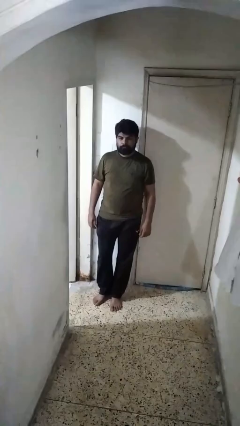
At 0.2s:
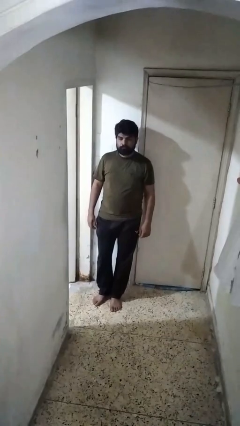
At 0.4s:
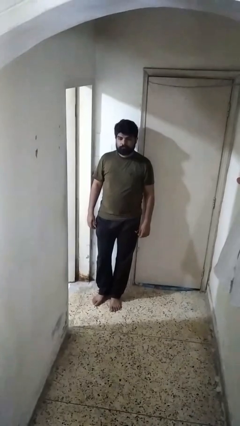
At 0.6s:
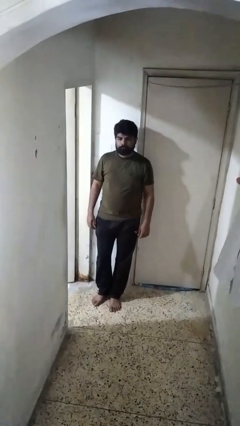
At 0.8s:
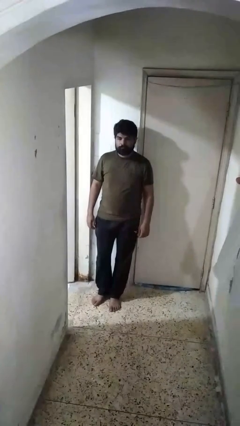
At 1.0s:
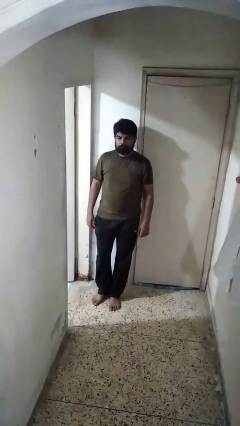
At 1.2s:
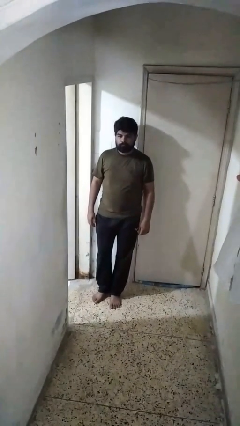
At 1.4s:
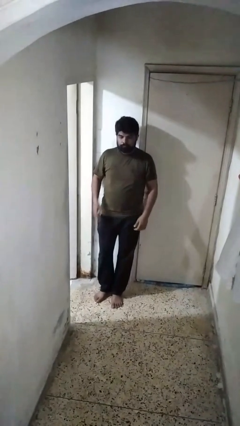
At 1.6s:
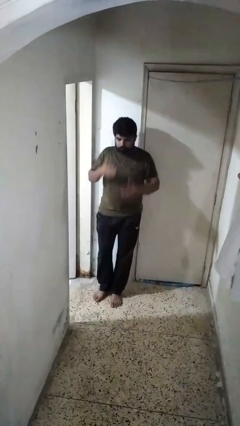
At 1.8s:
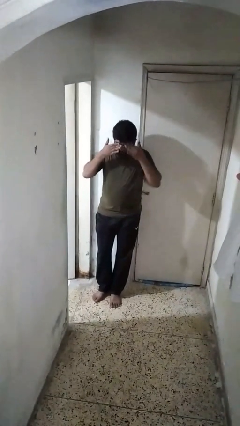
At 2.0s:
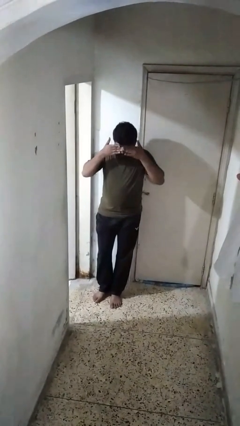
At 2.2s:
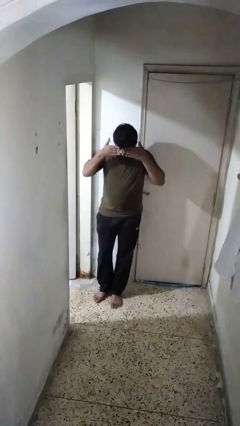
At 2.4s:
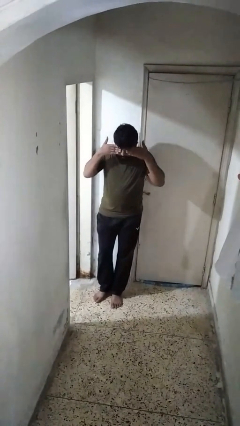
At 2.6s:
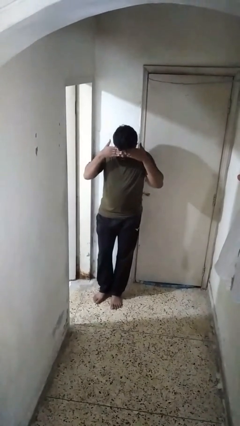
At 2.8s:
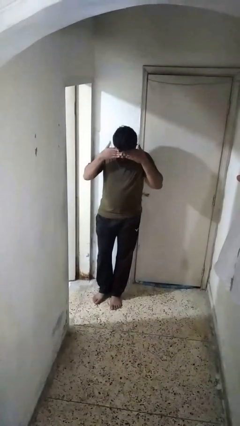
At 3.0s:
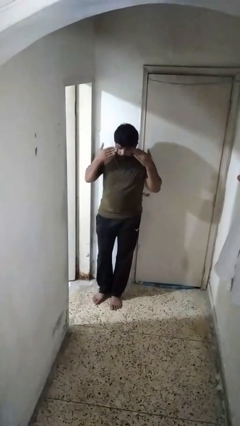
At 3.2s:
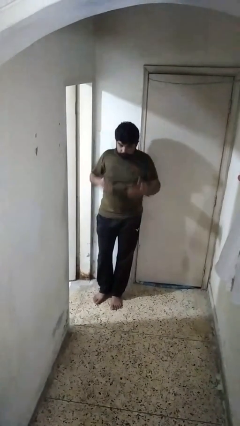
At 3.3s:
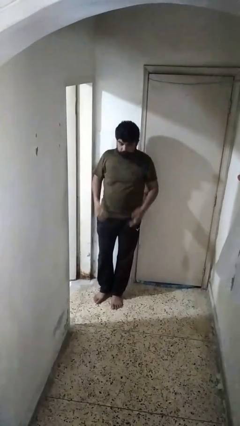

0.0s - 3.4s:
person rubs eyes

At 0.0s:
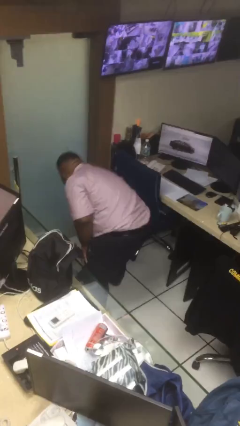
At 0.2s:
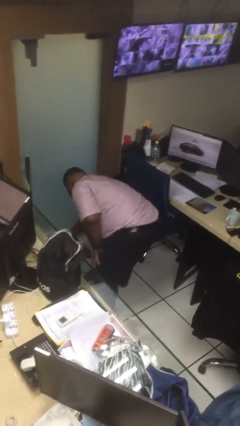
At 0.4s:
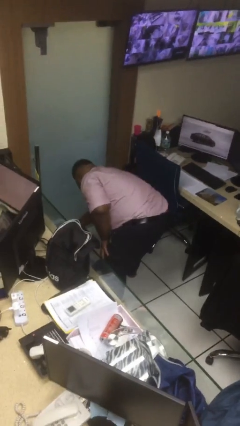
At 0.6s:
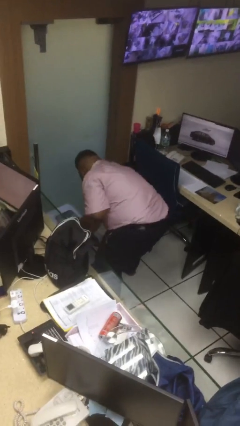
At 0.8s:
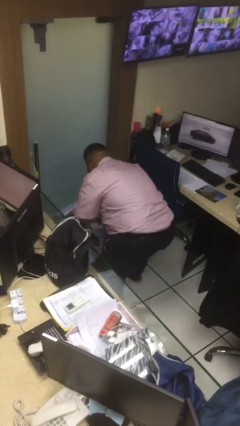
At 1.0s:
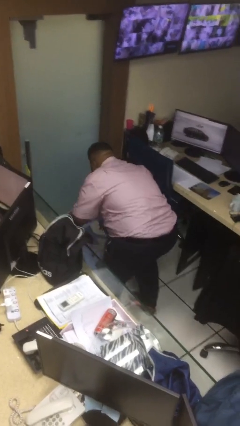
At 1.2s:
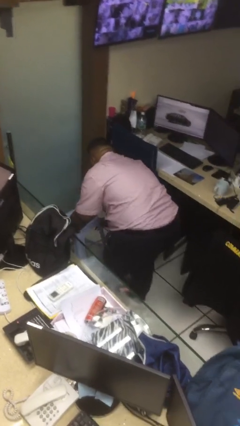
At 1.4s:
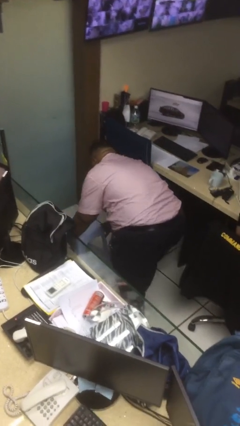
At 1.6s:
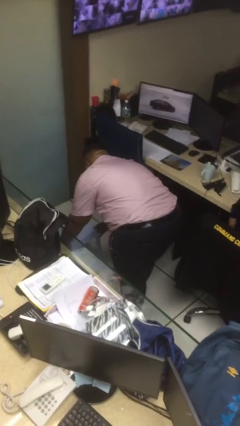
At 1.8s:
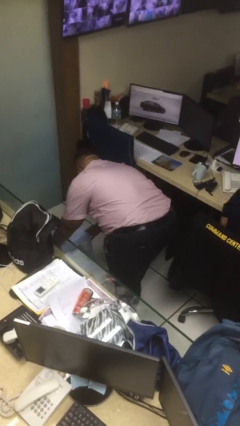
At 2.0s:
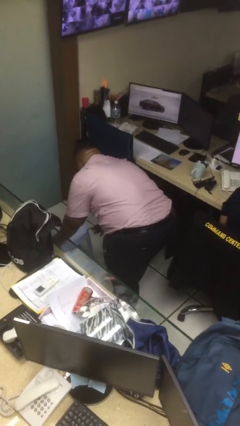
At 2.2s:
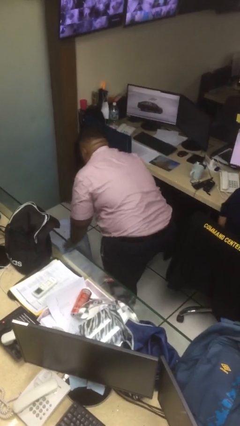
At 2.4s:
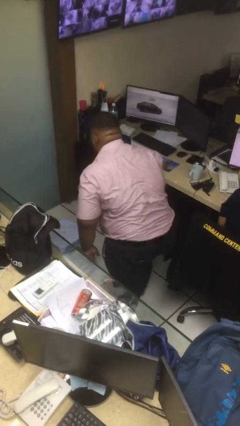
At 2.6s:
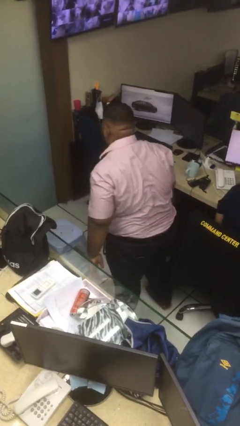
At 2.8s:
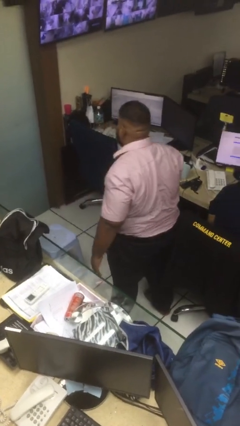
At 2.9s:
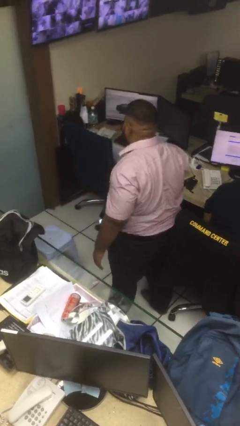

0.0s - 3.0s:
person sets upright furniture

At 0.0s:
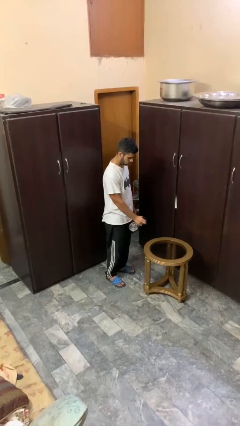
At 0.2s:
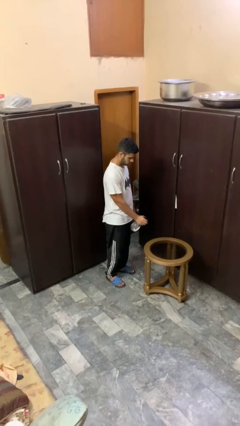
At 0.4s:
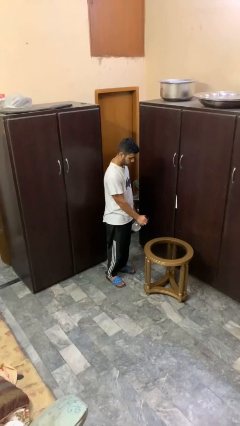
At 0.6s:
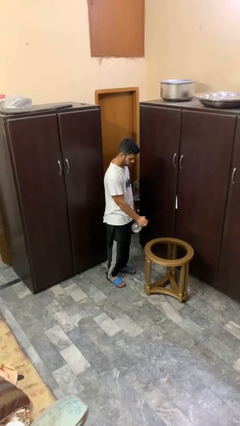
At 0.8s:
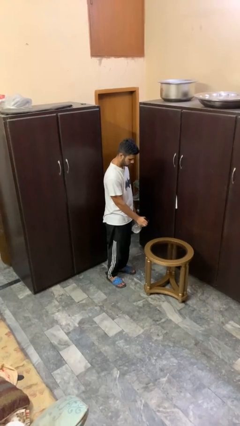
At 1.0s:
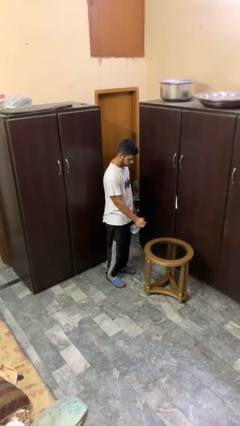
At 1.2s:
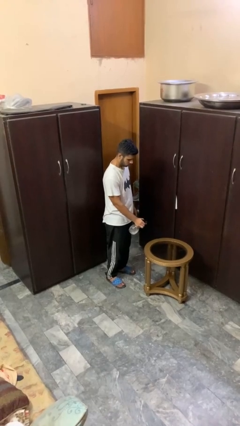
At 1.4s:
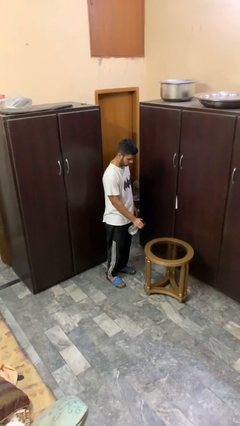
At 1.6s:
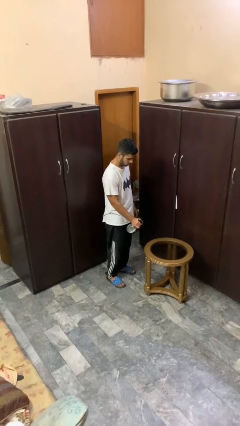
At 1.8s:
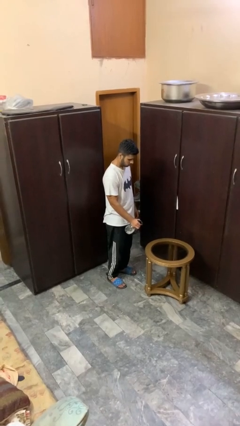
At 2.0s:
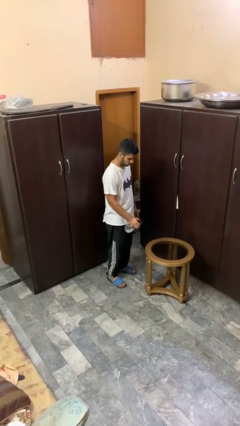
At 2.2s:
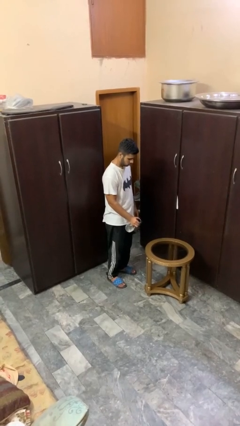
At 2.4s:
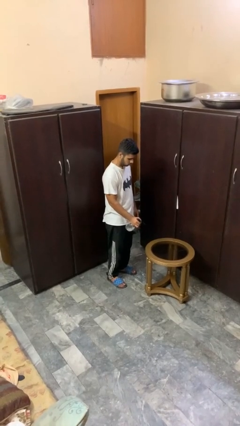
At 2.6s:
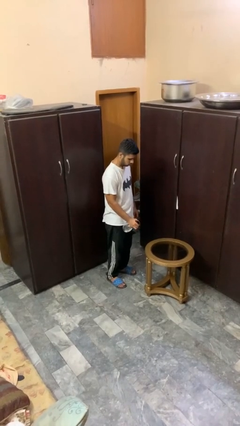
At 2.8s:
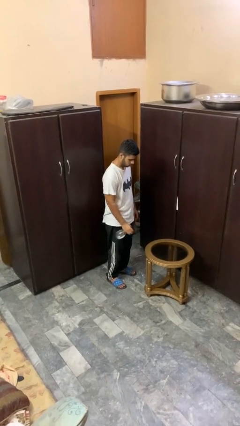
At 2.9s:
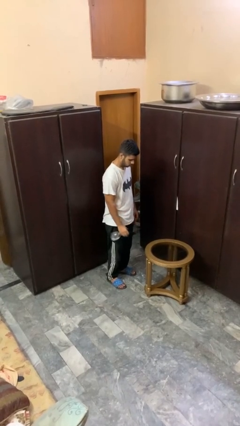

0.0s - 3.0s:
person sprays from bottle

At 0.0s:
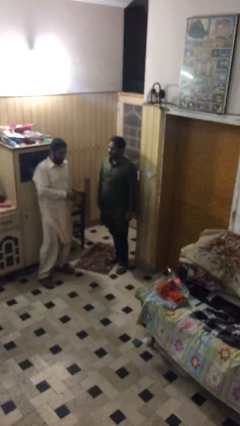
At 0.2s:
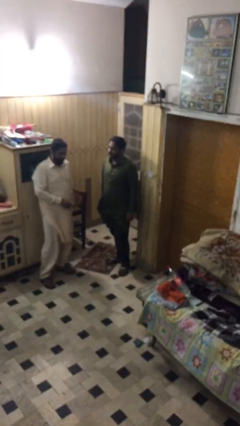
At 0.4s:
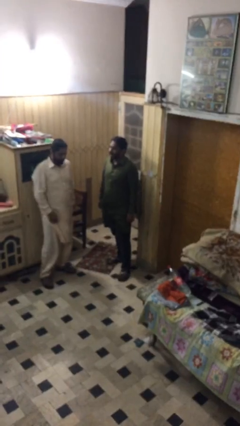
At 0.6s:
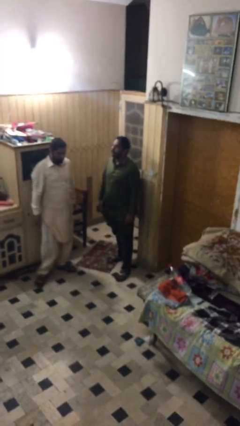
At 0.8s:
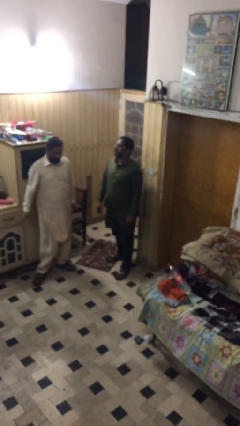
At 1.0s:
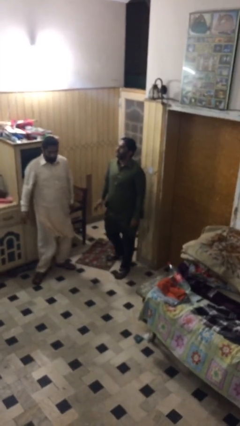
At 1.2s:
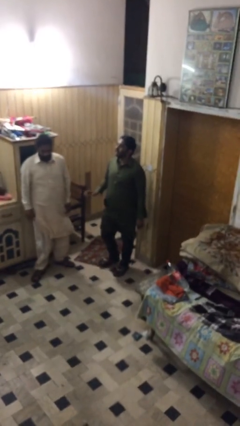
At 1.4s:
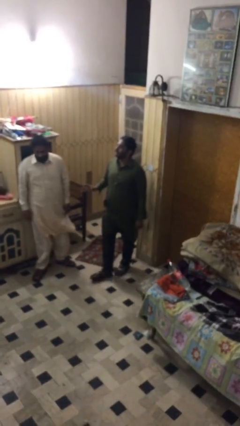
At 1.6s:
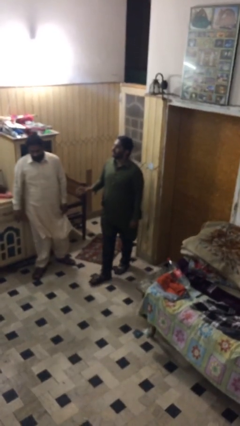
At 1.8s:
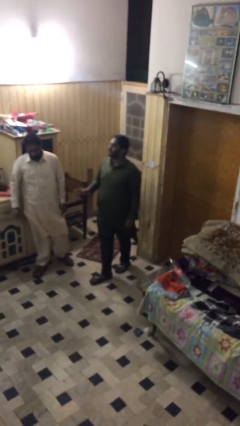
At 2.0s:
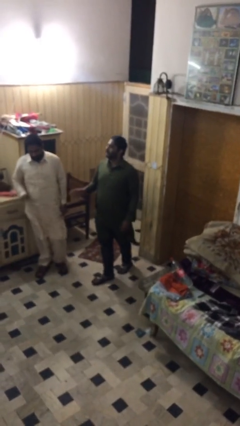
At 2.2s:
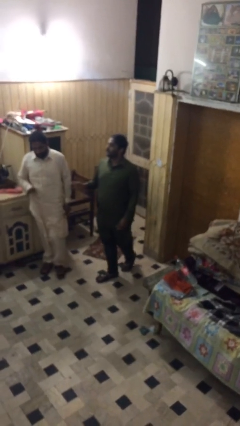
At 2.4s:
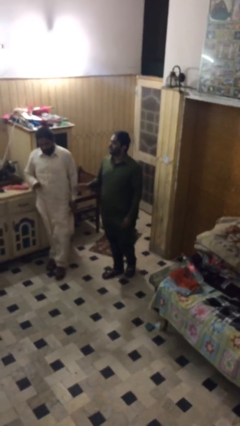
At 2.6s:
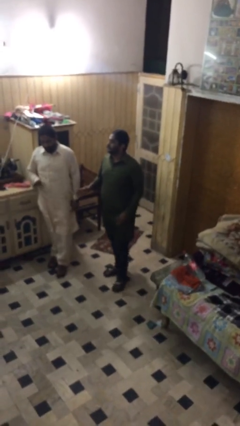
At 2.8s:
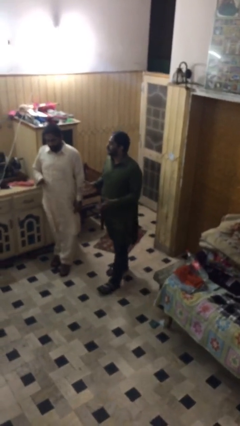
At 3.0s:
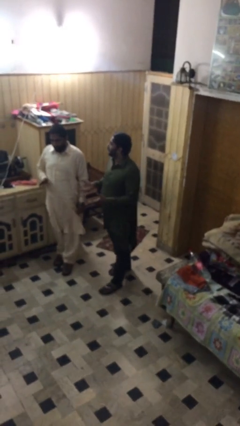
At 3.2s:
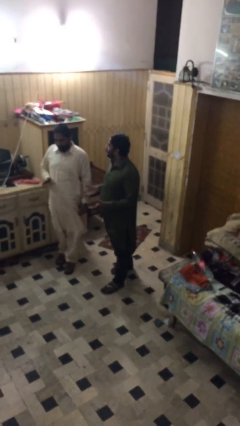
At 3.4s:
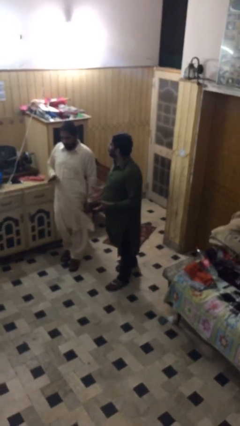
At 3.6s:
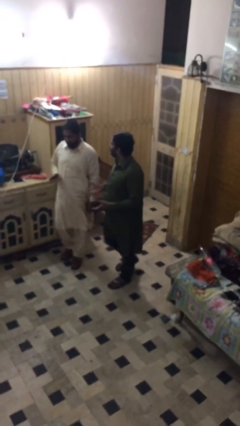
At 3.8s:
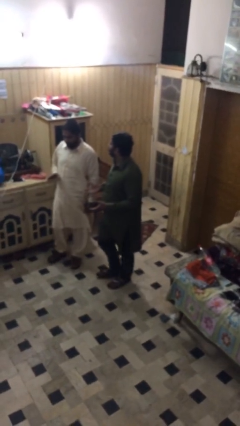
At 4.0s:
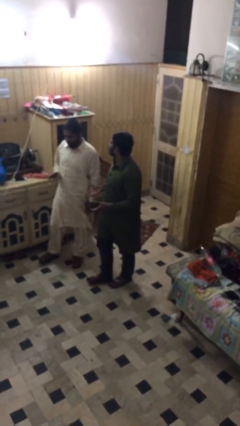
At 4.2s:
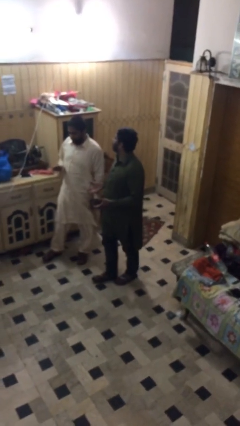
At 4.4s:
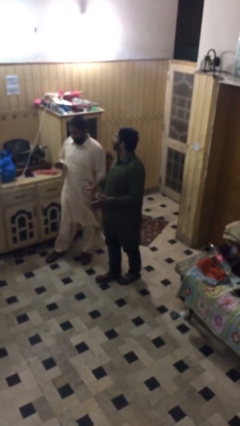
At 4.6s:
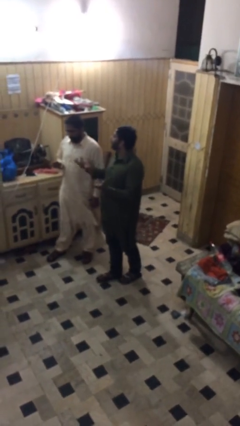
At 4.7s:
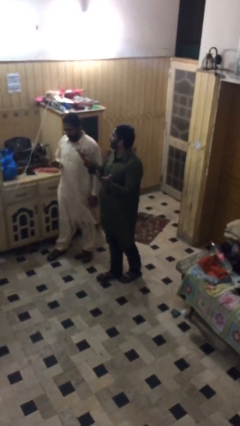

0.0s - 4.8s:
person talks to person

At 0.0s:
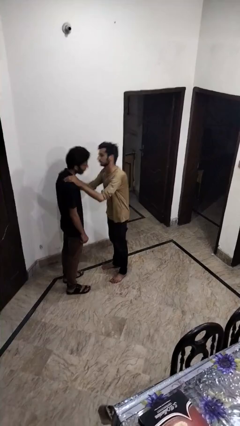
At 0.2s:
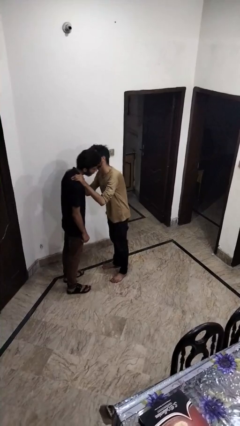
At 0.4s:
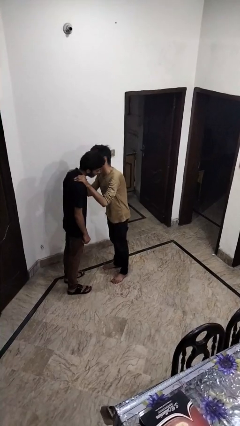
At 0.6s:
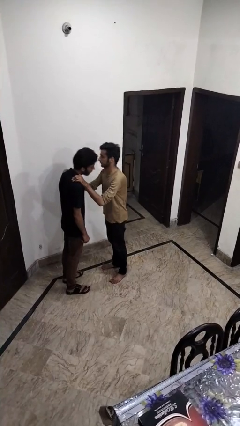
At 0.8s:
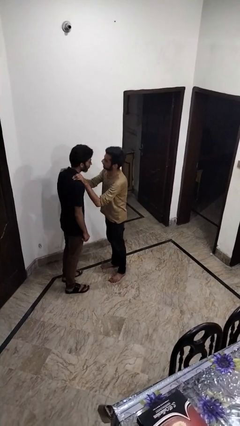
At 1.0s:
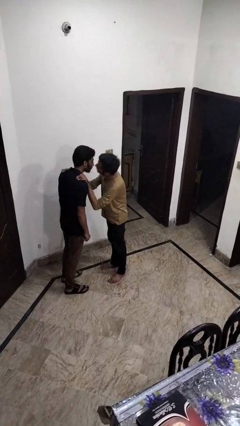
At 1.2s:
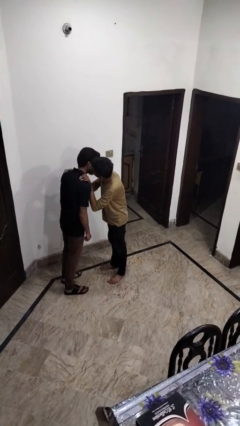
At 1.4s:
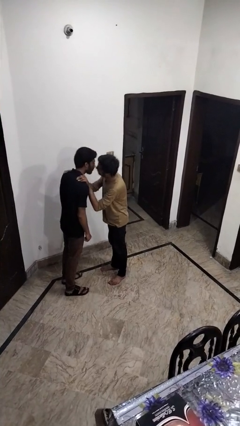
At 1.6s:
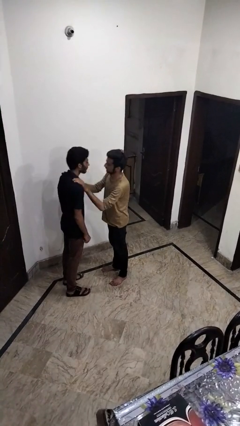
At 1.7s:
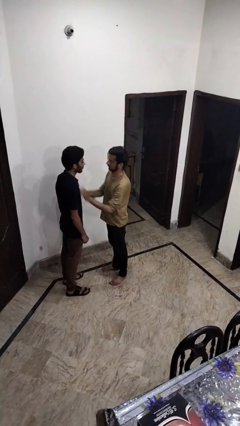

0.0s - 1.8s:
person kisses cheek of person

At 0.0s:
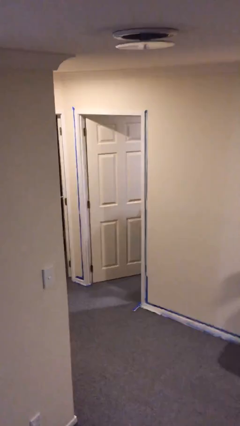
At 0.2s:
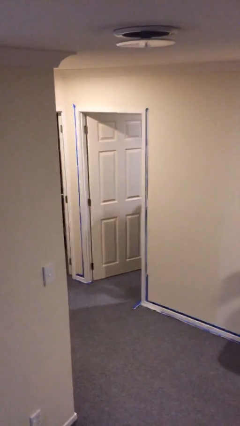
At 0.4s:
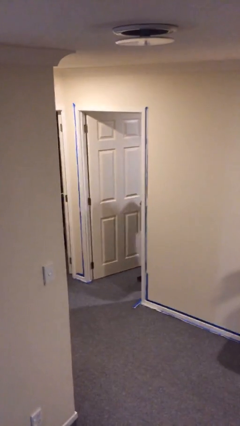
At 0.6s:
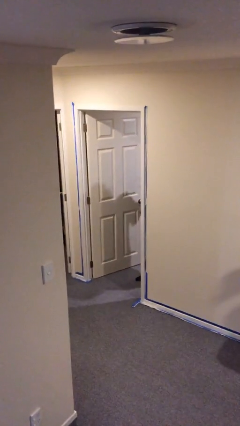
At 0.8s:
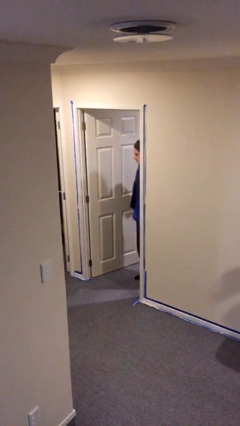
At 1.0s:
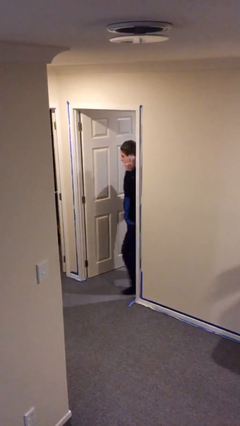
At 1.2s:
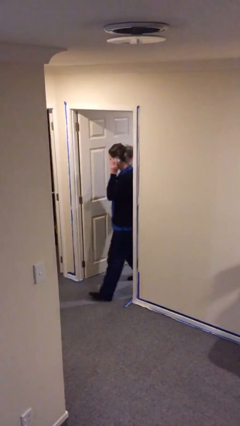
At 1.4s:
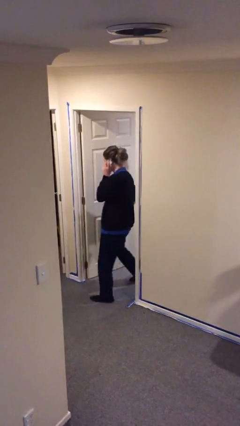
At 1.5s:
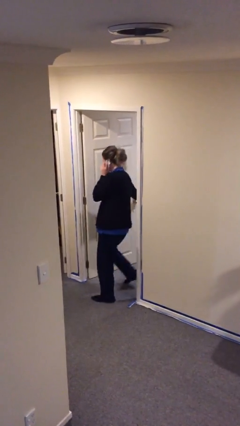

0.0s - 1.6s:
person enters scene through structure
